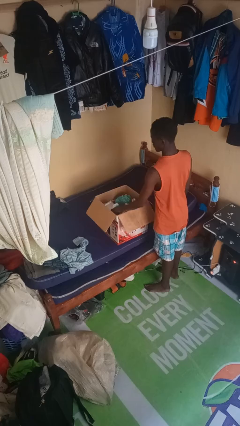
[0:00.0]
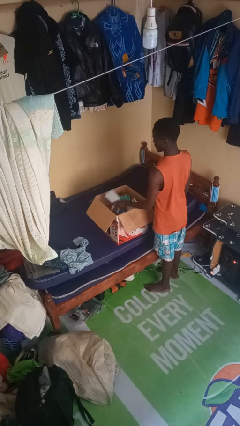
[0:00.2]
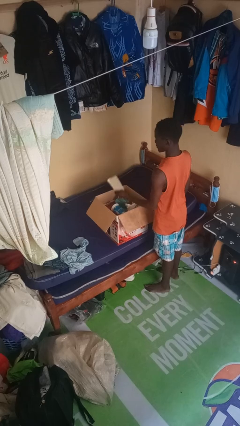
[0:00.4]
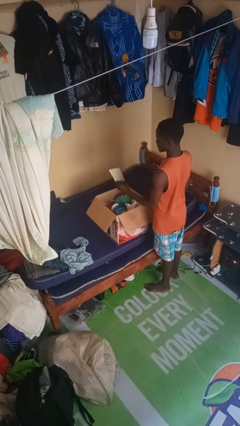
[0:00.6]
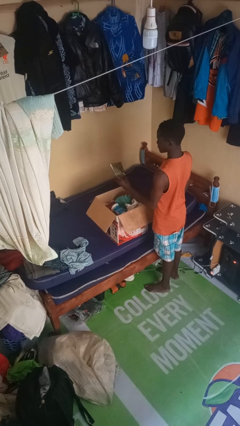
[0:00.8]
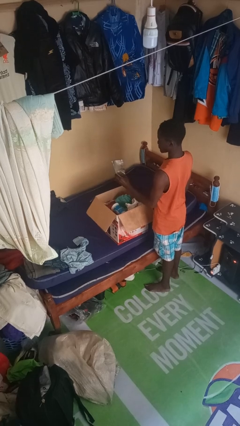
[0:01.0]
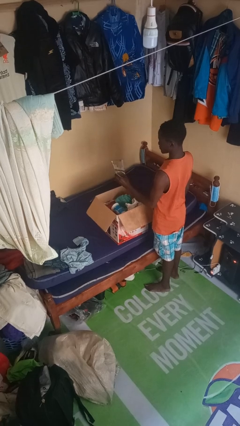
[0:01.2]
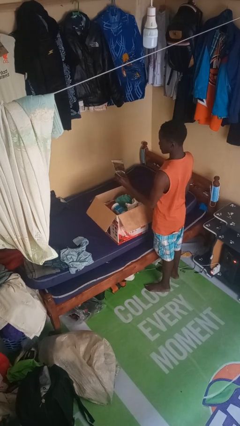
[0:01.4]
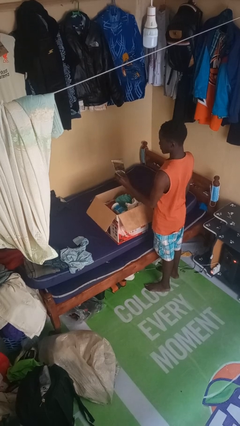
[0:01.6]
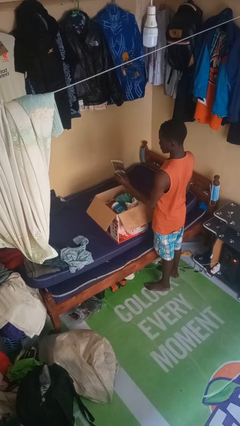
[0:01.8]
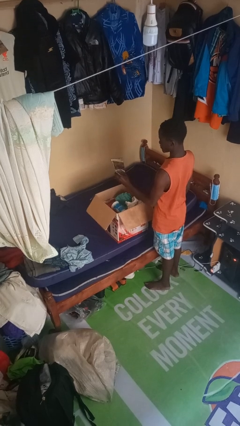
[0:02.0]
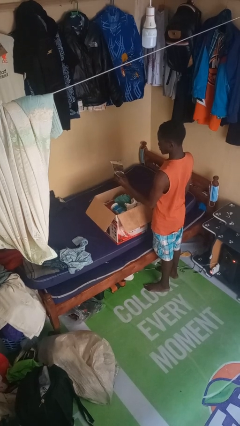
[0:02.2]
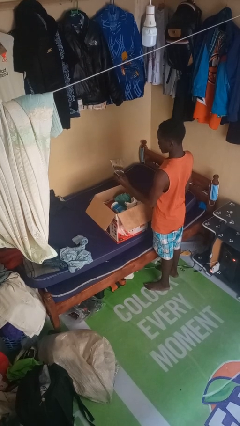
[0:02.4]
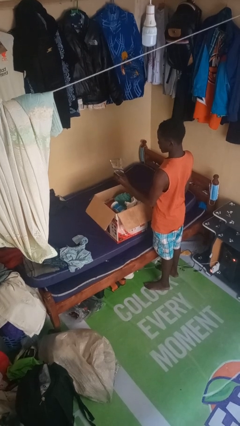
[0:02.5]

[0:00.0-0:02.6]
person takes object from box

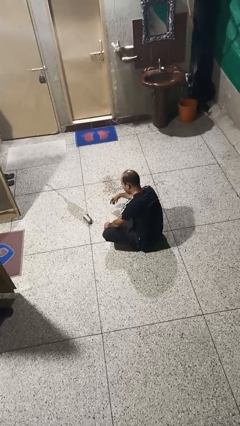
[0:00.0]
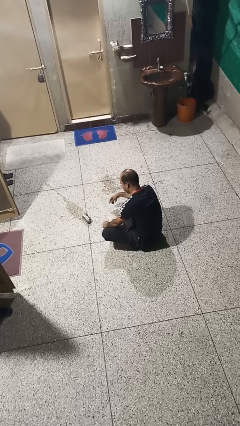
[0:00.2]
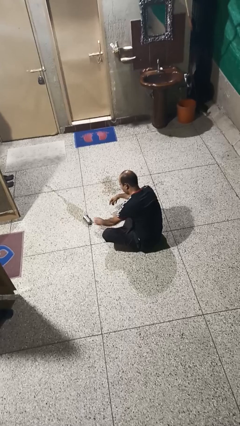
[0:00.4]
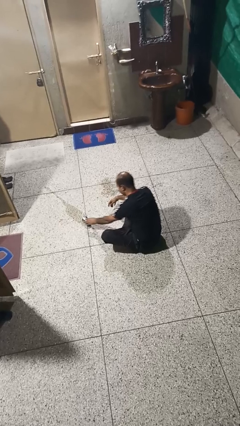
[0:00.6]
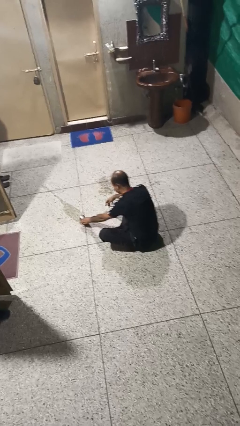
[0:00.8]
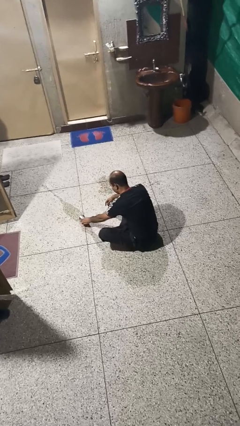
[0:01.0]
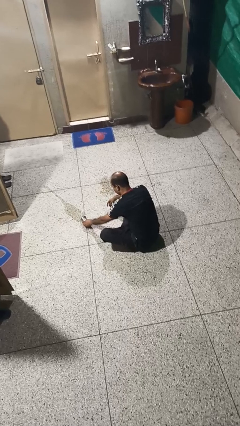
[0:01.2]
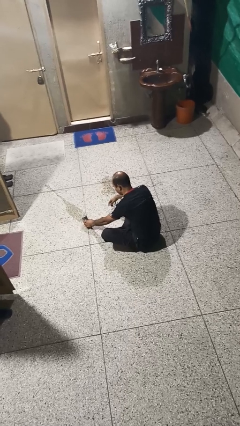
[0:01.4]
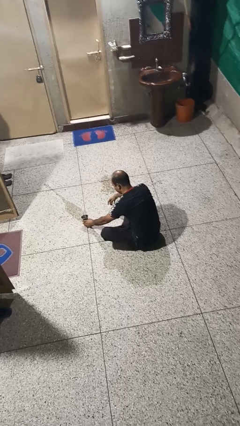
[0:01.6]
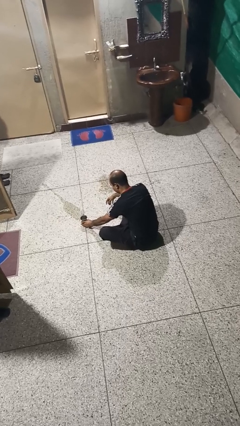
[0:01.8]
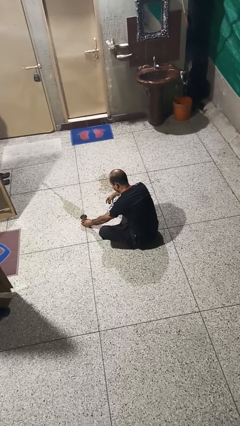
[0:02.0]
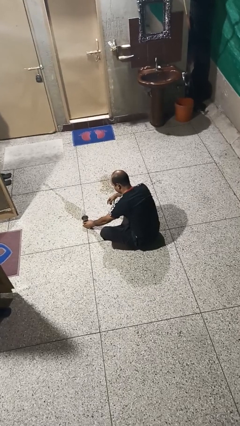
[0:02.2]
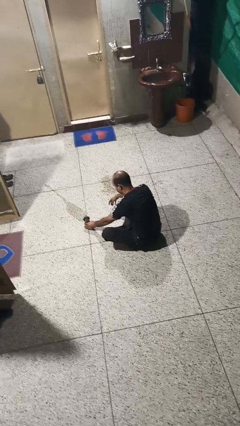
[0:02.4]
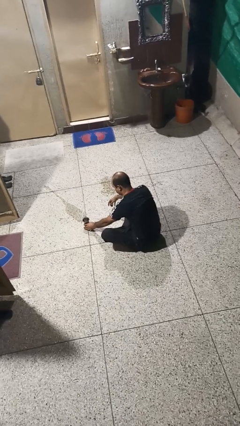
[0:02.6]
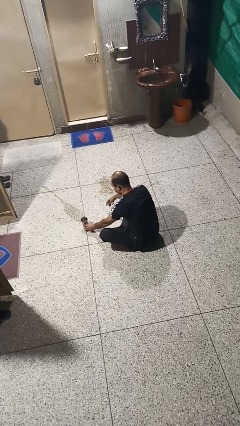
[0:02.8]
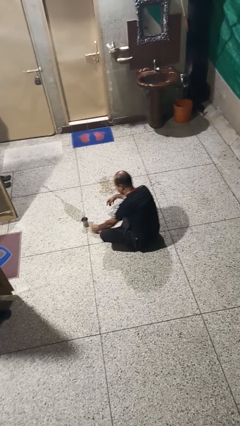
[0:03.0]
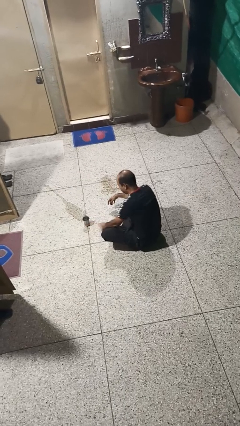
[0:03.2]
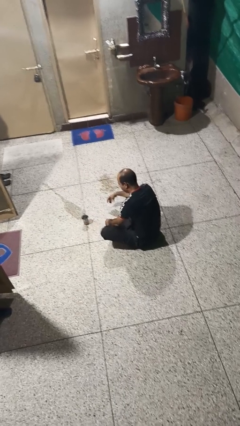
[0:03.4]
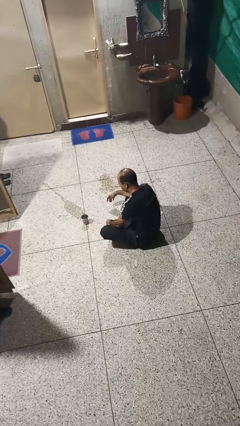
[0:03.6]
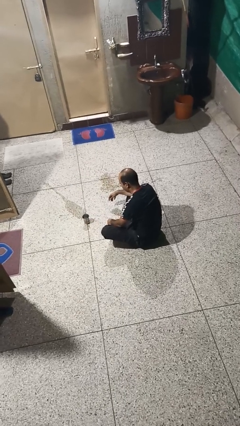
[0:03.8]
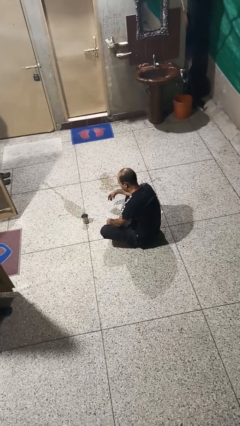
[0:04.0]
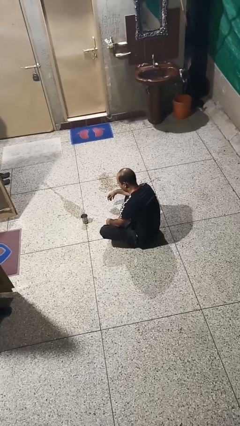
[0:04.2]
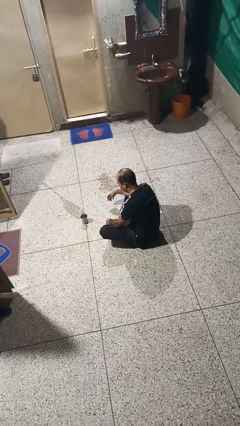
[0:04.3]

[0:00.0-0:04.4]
person sets upright glass

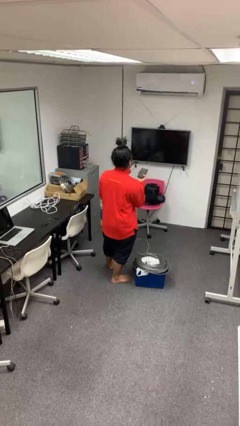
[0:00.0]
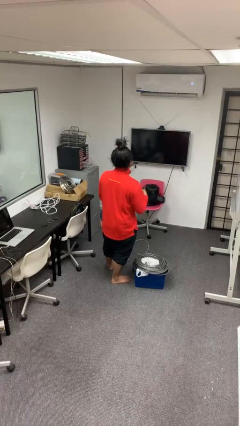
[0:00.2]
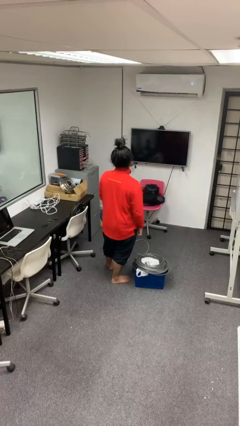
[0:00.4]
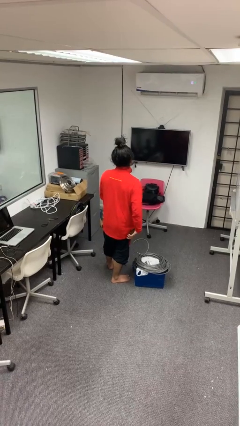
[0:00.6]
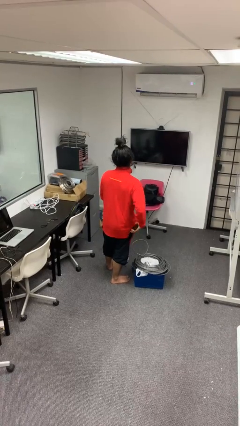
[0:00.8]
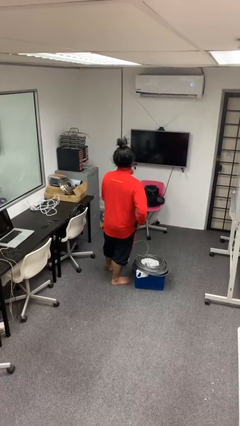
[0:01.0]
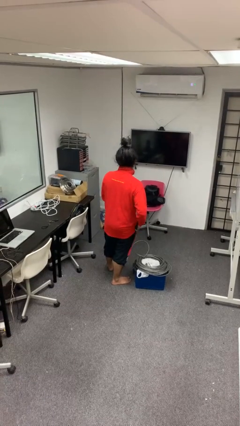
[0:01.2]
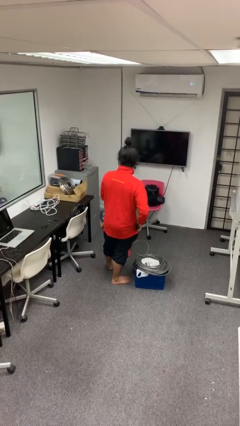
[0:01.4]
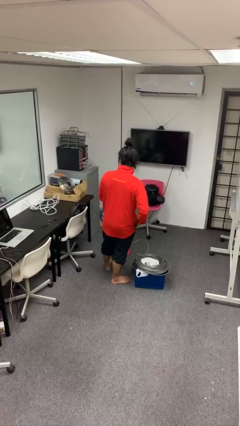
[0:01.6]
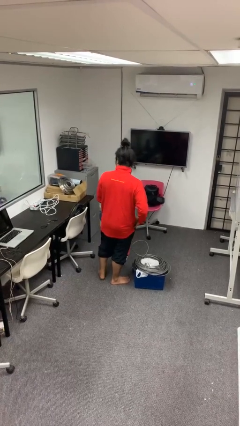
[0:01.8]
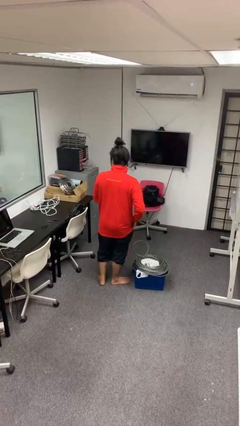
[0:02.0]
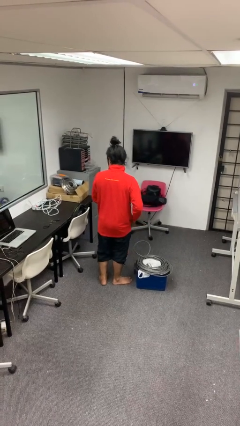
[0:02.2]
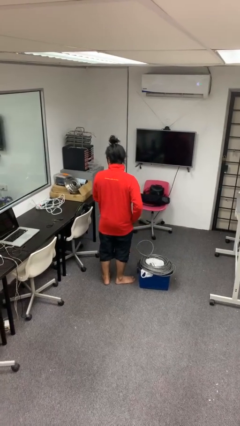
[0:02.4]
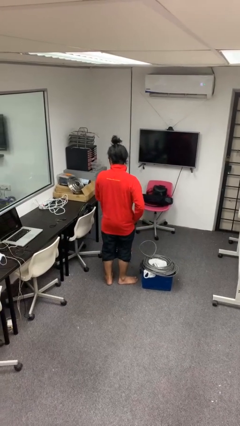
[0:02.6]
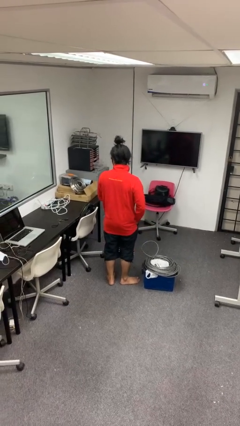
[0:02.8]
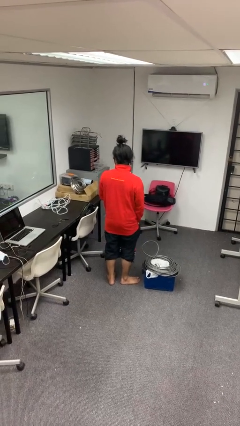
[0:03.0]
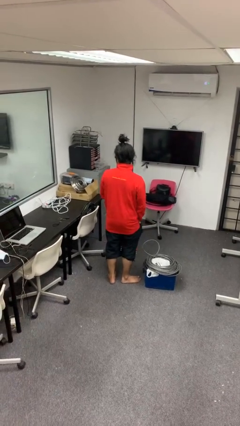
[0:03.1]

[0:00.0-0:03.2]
person puts phone into pocket

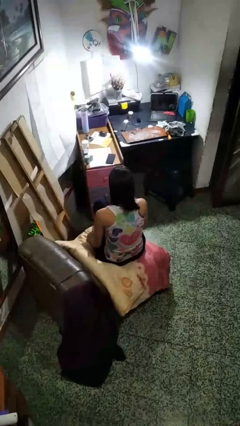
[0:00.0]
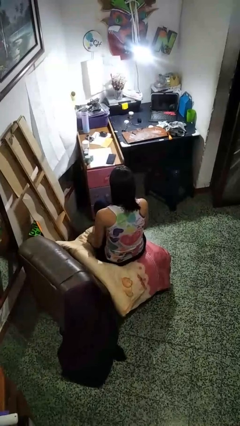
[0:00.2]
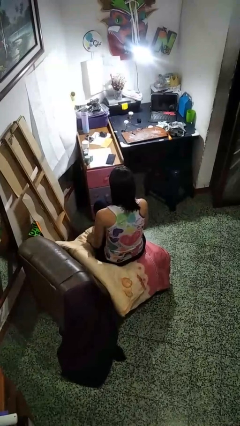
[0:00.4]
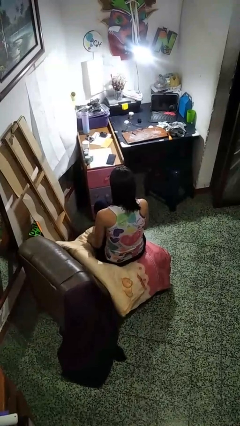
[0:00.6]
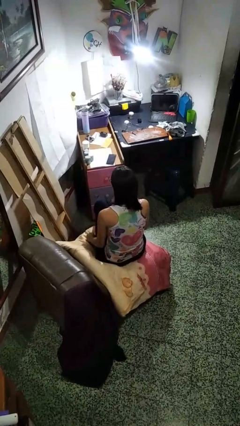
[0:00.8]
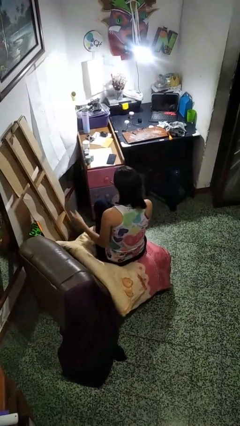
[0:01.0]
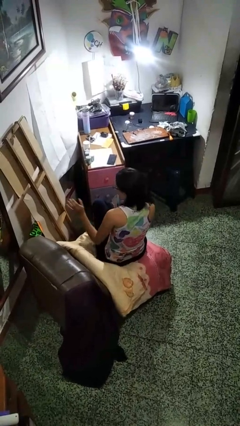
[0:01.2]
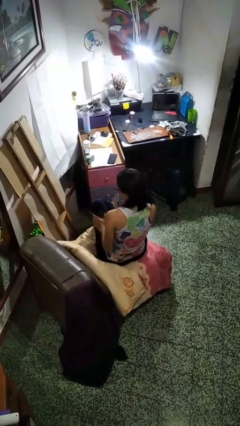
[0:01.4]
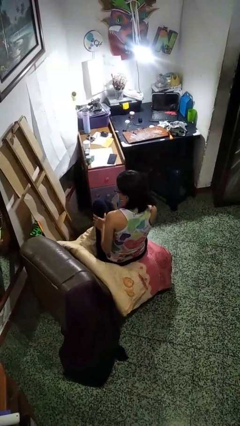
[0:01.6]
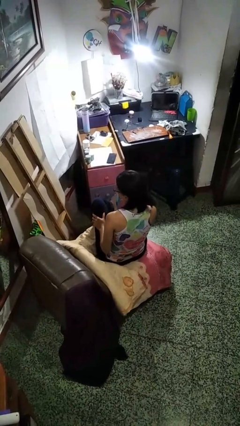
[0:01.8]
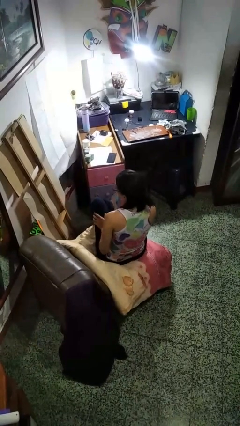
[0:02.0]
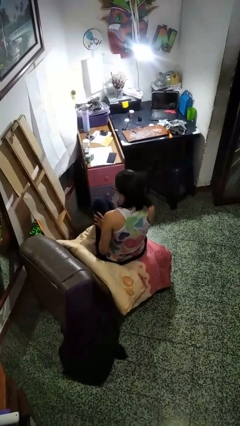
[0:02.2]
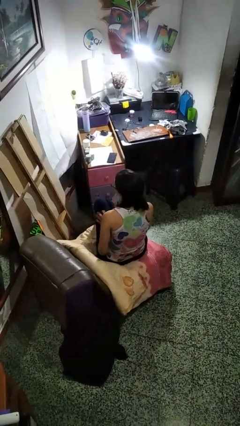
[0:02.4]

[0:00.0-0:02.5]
person slaps hands on thighs

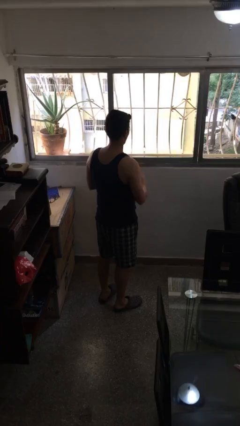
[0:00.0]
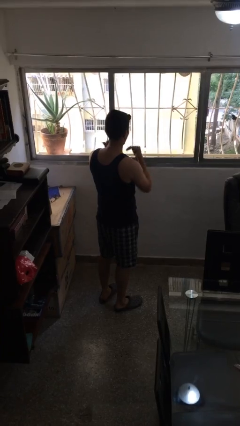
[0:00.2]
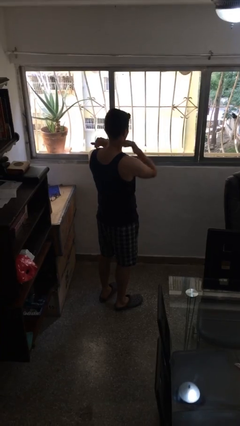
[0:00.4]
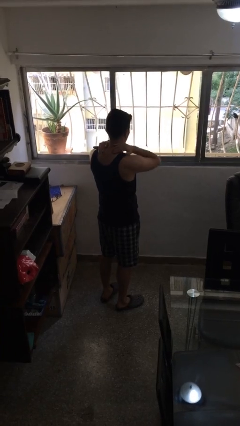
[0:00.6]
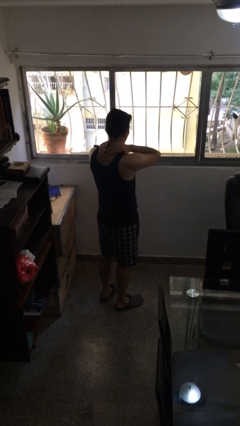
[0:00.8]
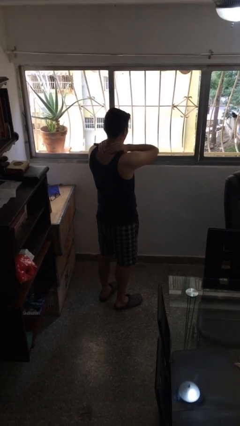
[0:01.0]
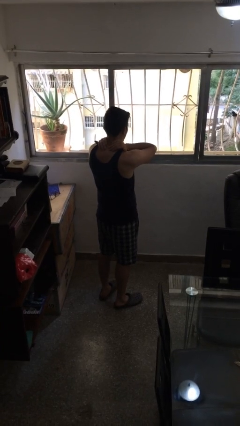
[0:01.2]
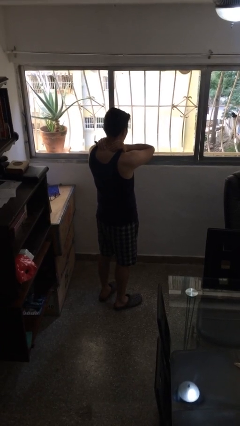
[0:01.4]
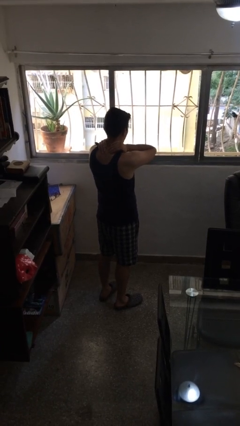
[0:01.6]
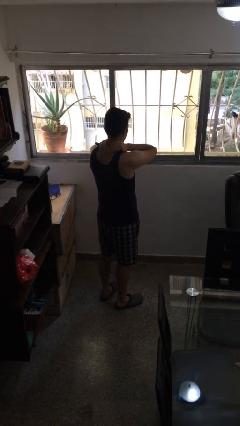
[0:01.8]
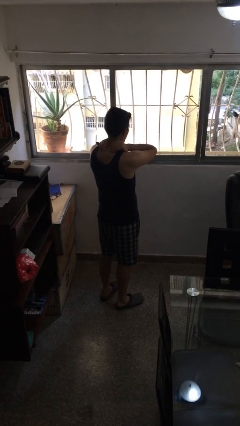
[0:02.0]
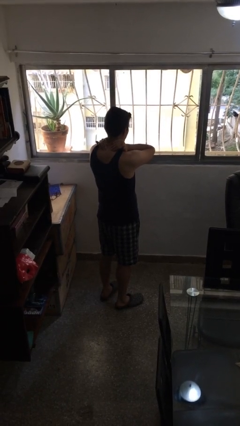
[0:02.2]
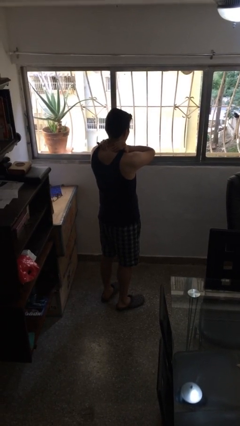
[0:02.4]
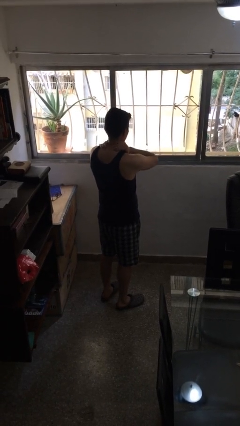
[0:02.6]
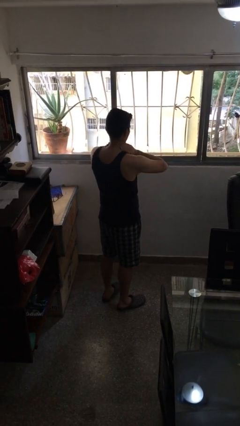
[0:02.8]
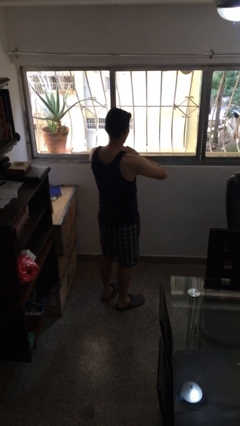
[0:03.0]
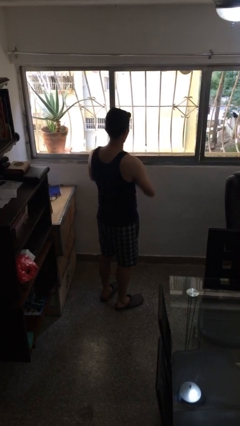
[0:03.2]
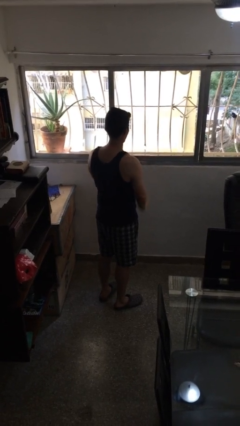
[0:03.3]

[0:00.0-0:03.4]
person rubs neck

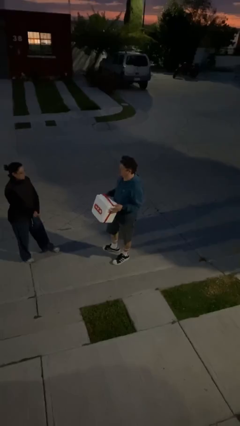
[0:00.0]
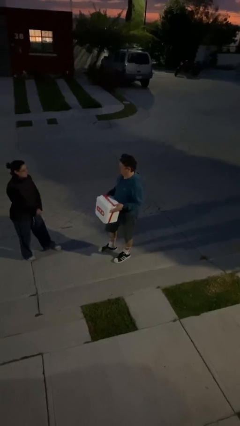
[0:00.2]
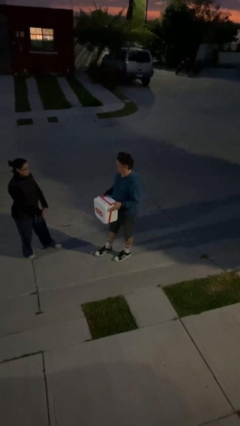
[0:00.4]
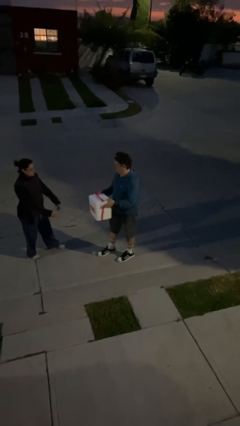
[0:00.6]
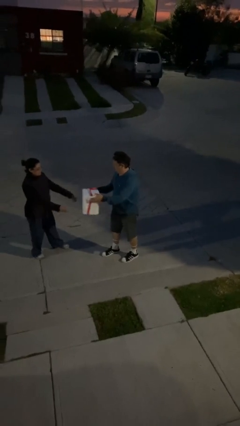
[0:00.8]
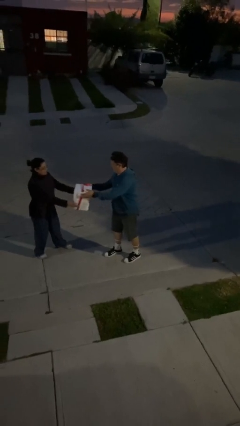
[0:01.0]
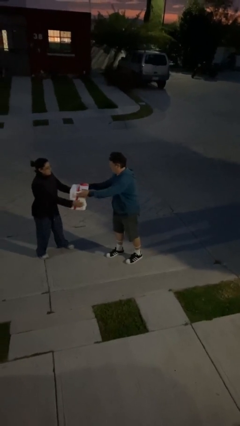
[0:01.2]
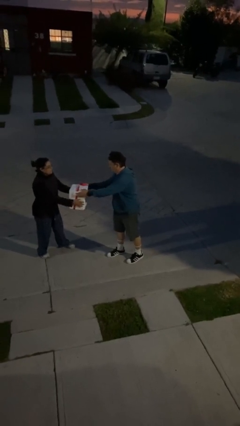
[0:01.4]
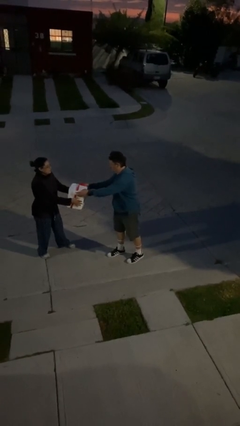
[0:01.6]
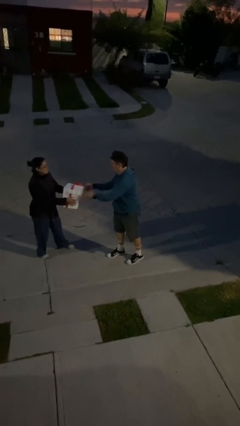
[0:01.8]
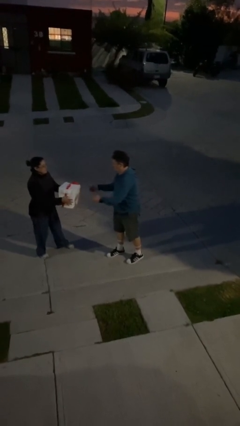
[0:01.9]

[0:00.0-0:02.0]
person transfers object to person
